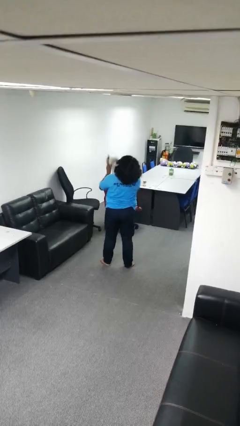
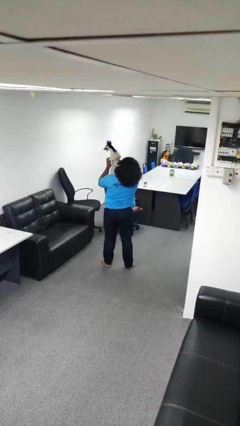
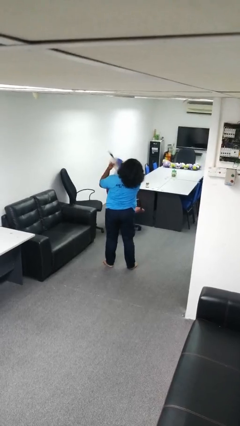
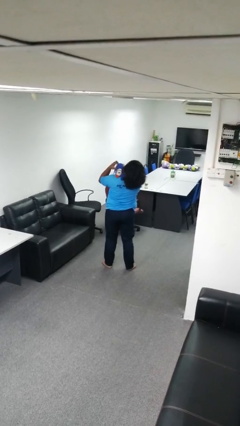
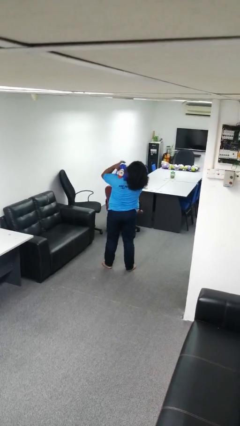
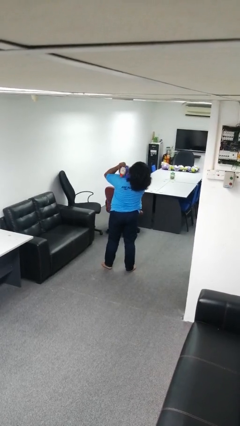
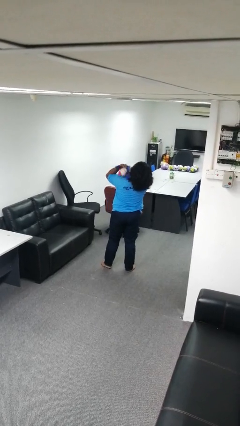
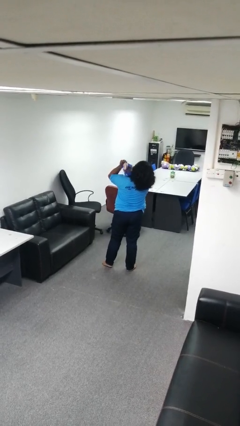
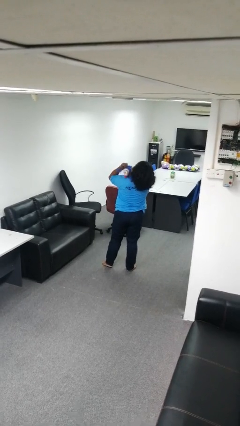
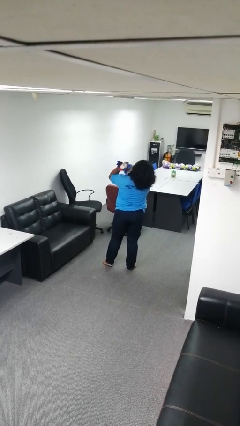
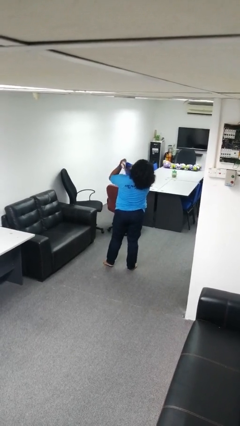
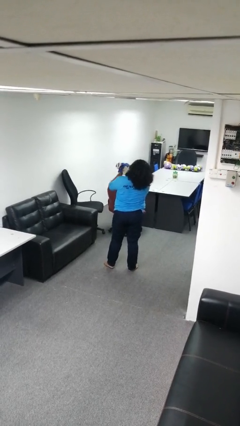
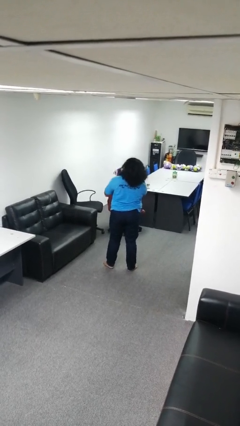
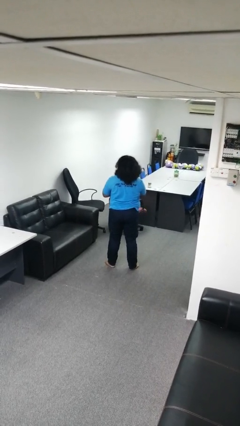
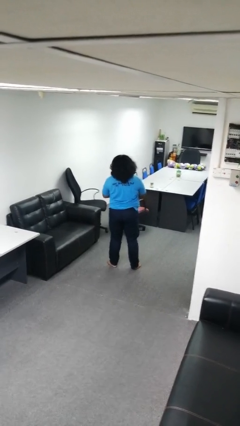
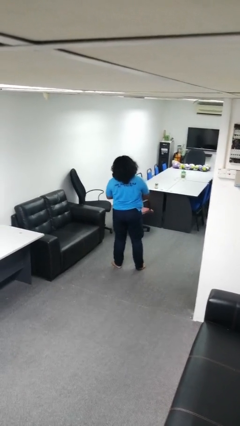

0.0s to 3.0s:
person hugs stuffed animal

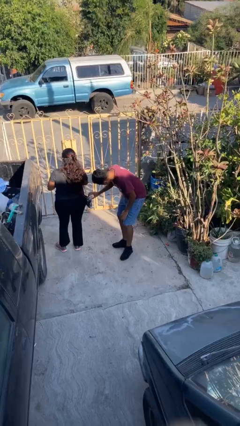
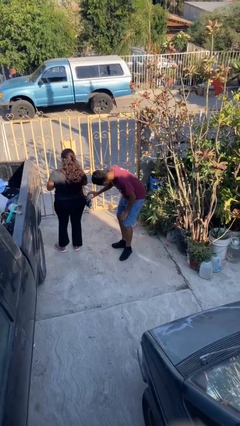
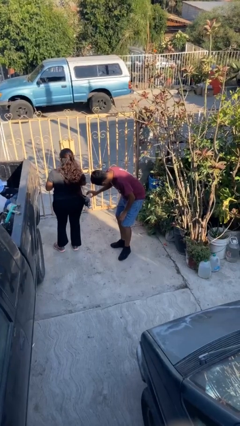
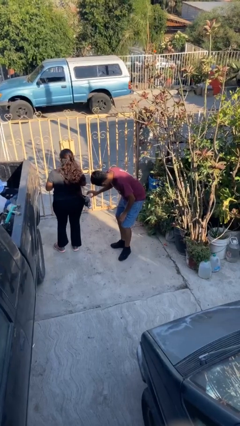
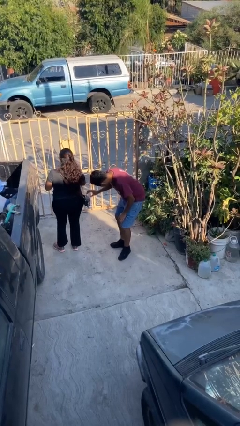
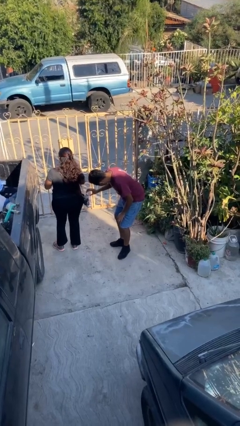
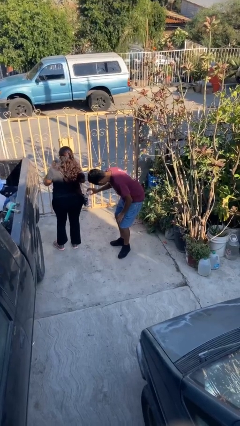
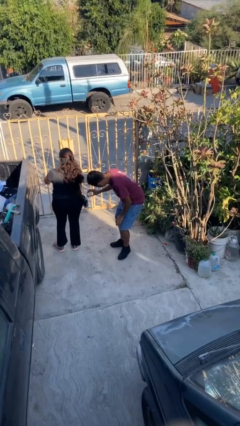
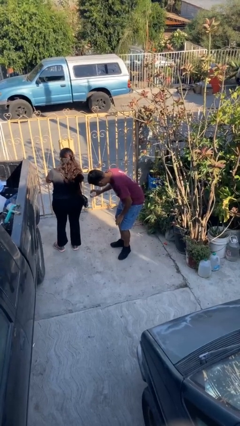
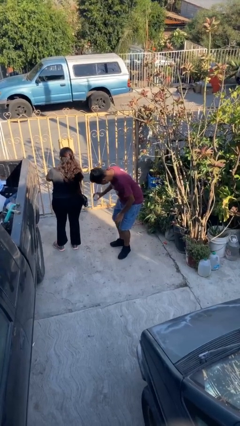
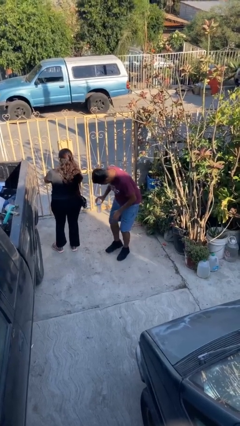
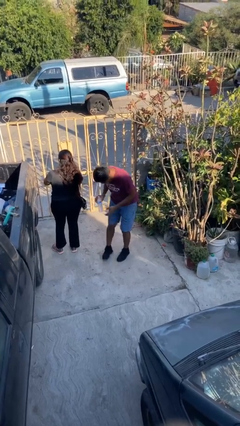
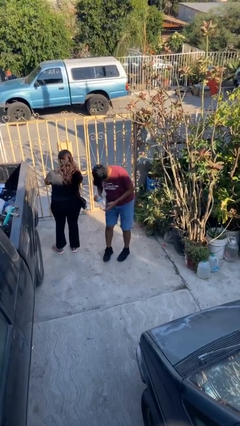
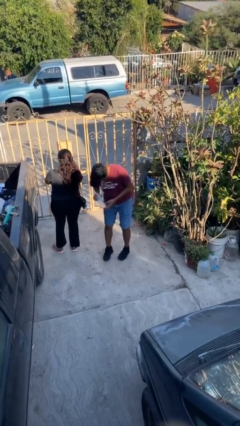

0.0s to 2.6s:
person steals object from person

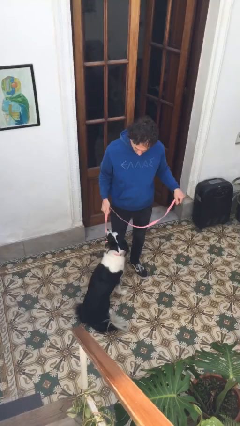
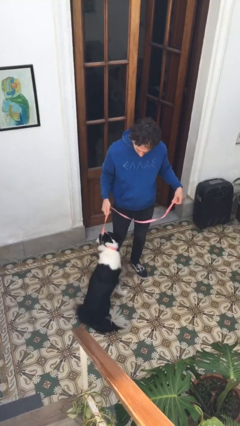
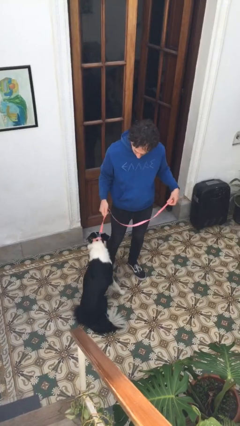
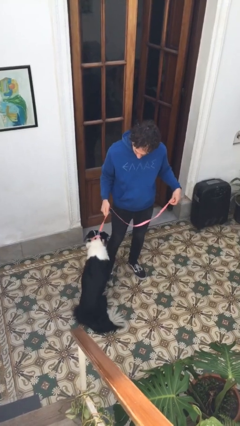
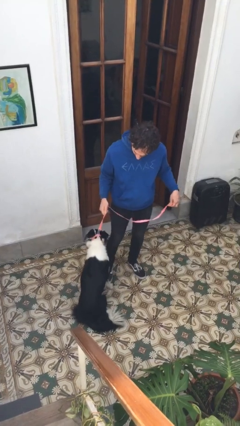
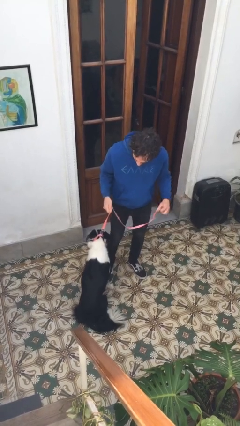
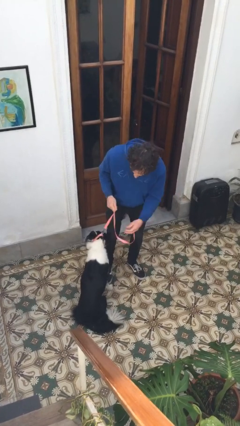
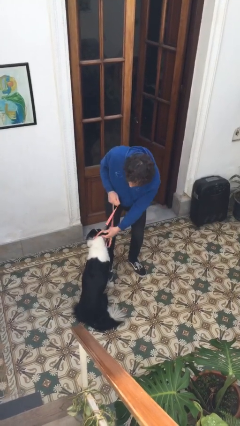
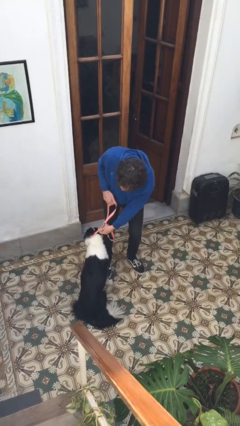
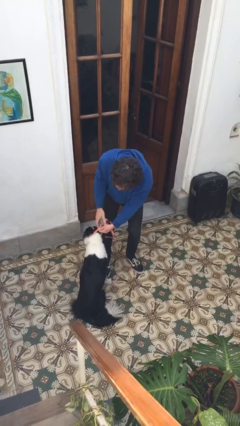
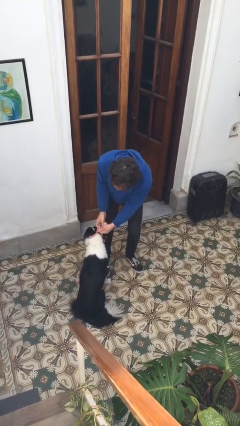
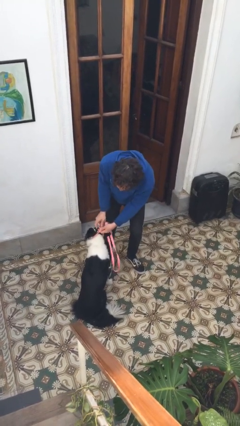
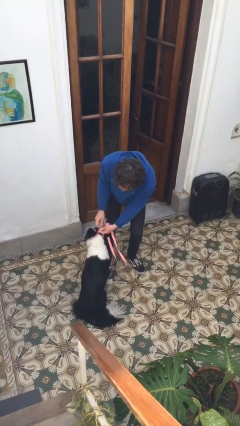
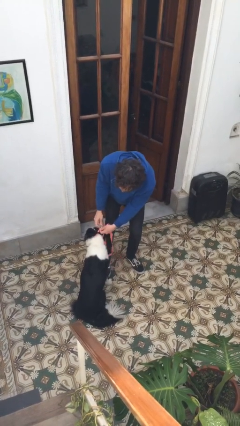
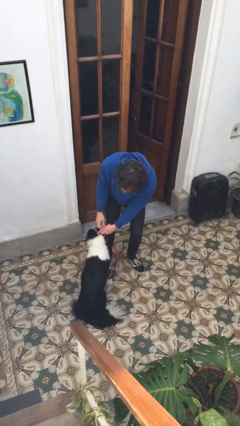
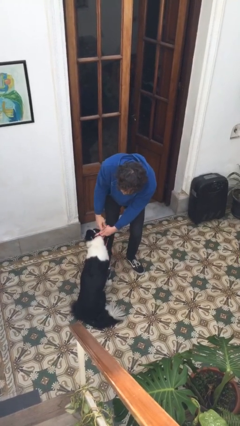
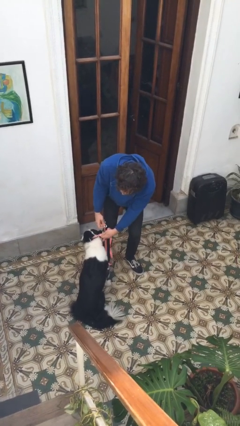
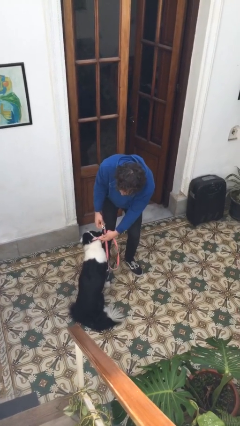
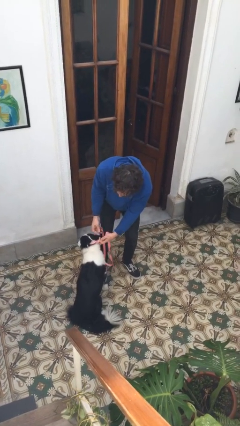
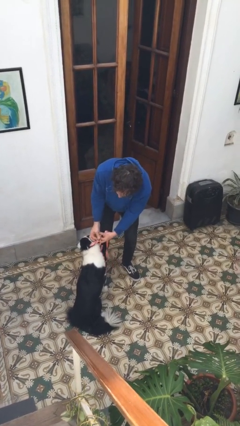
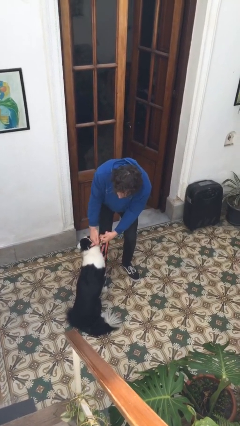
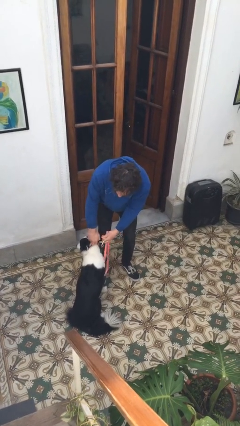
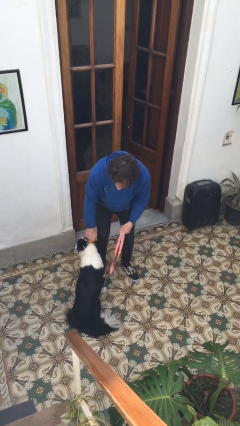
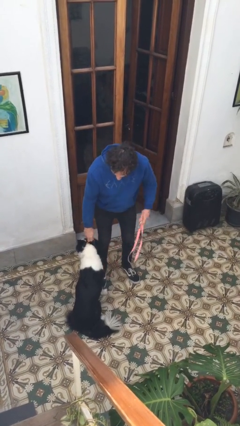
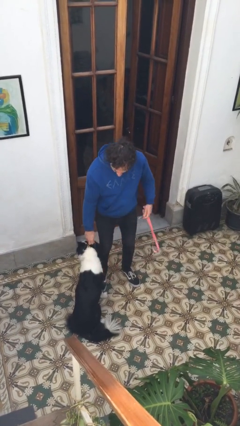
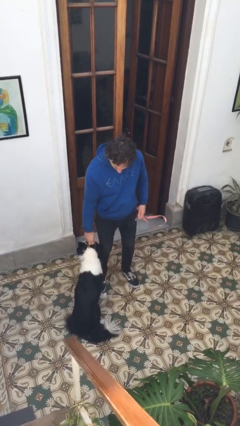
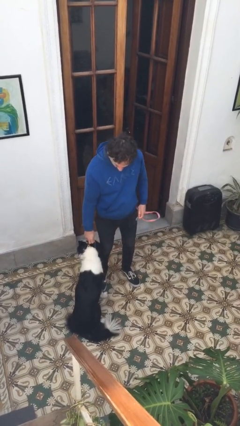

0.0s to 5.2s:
person unattaches leash from dog

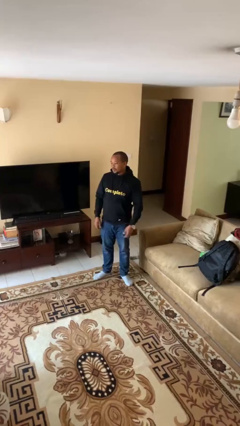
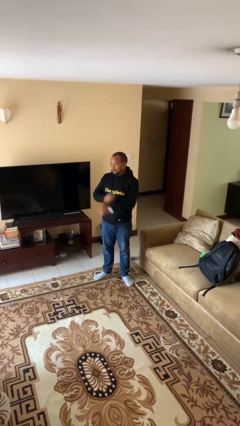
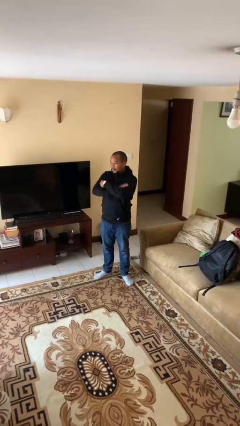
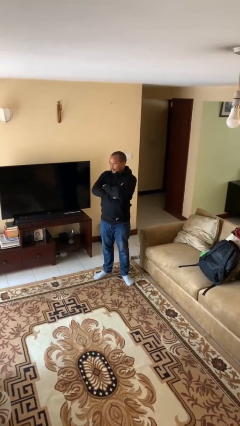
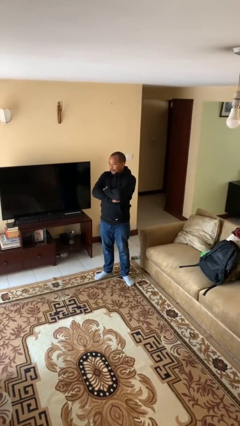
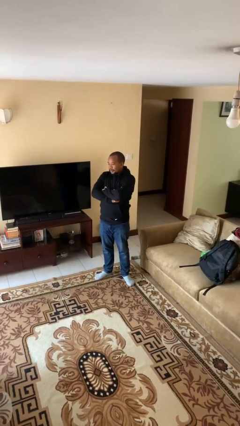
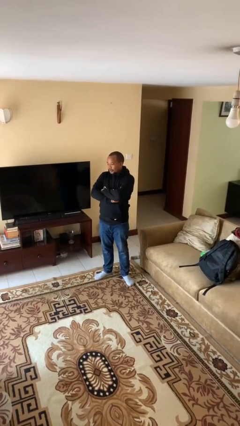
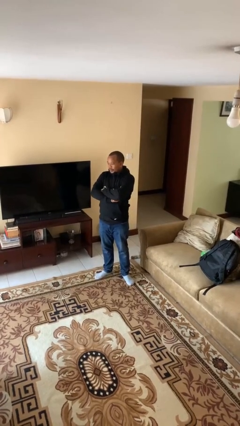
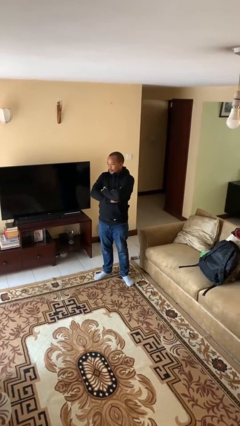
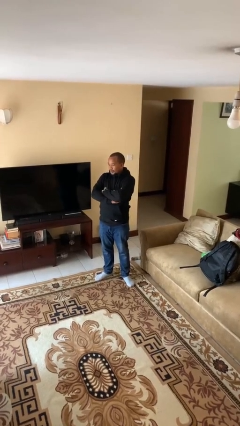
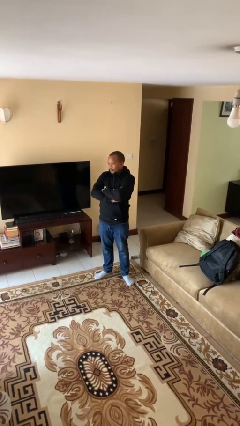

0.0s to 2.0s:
person crosses arms

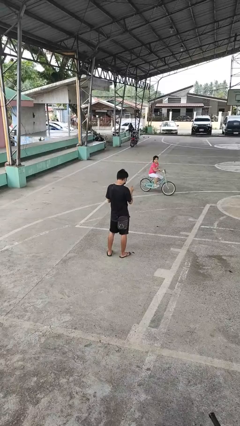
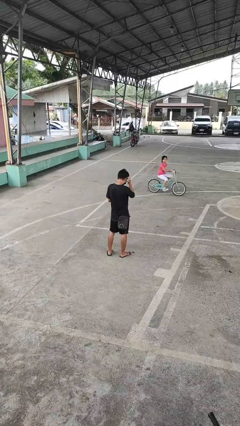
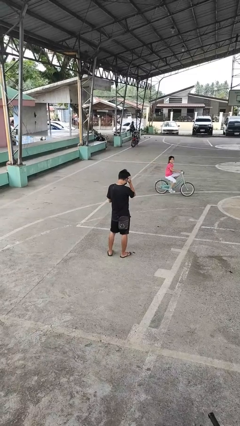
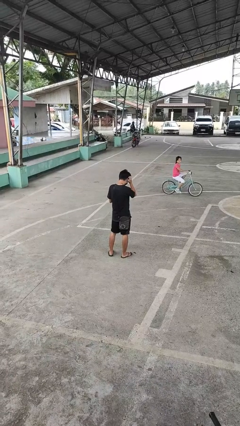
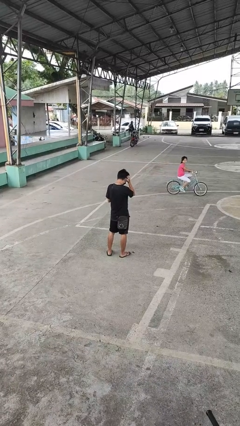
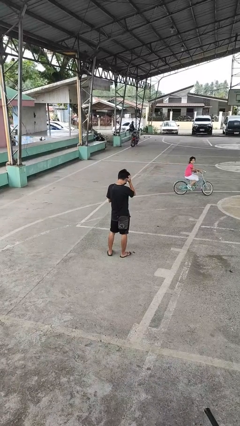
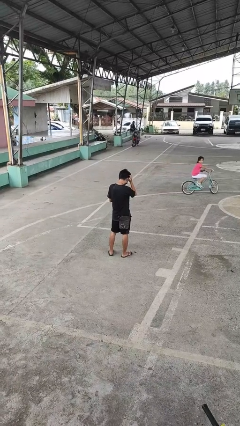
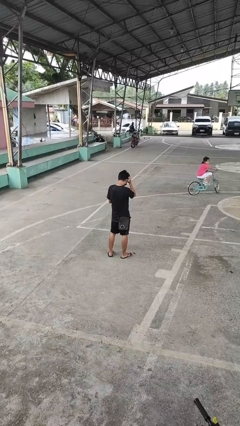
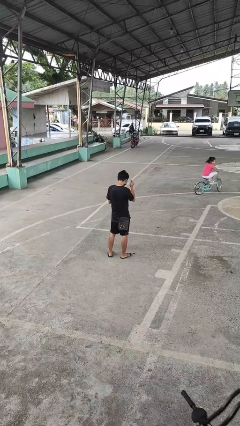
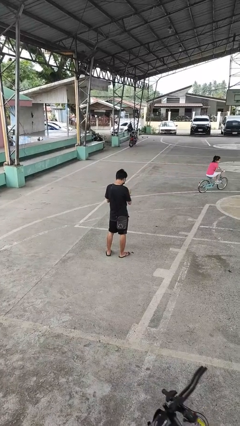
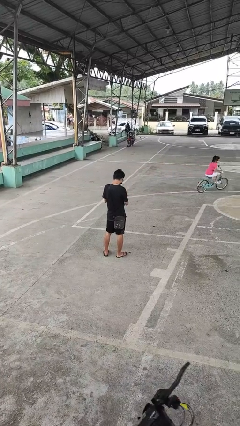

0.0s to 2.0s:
person scratches face

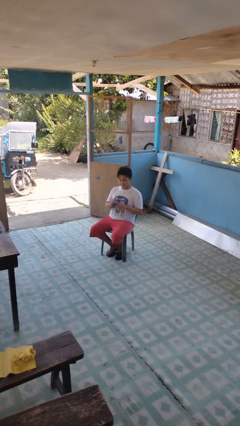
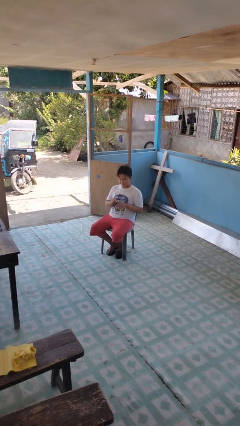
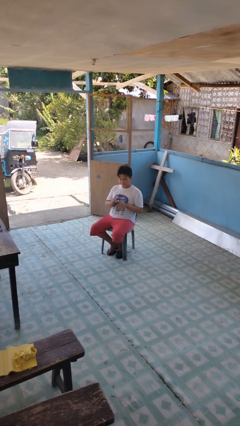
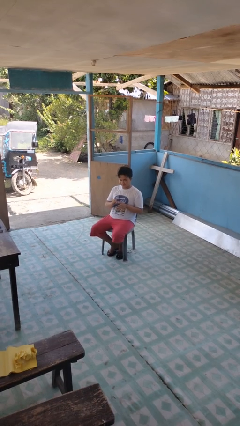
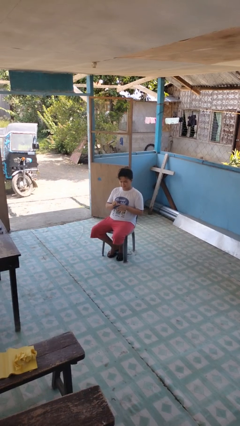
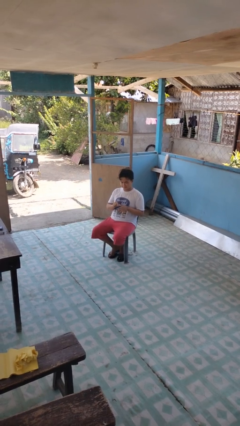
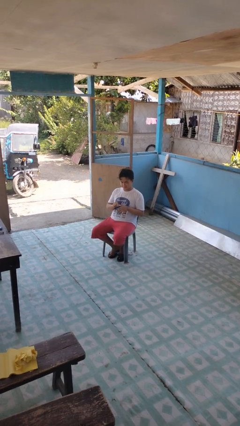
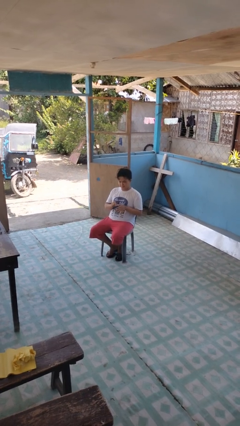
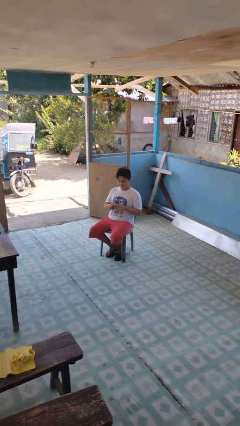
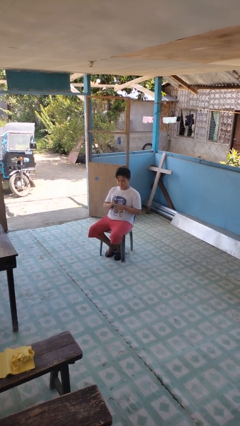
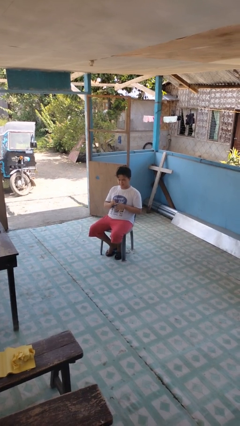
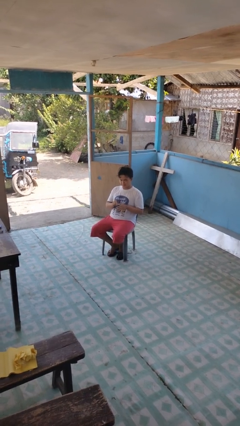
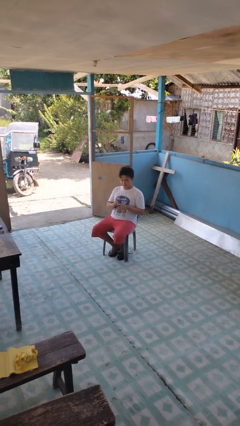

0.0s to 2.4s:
person files fingernails

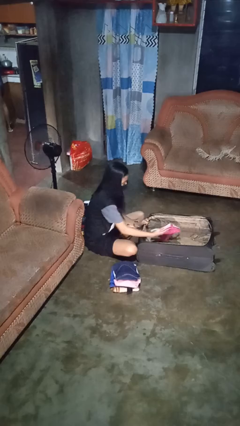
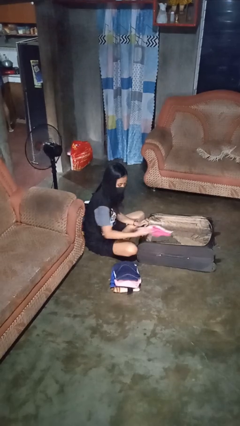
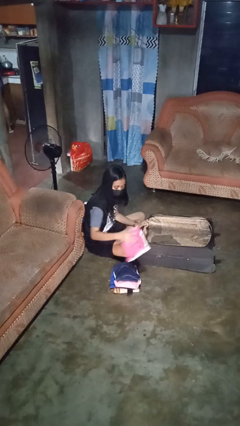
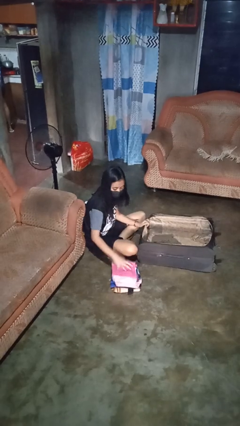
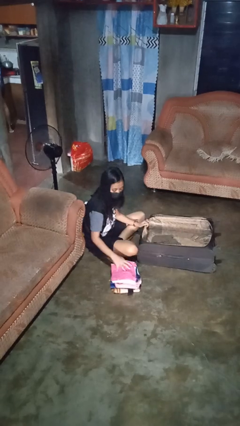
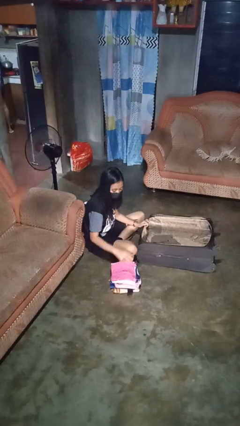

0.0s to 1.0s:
person unloads clothes from suitcase
